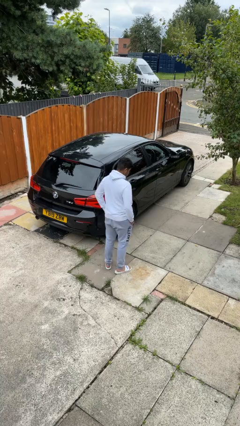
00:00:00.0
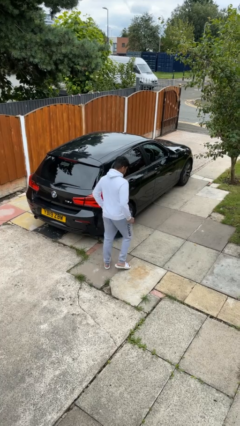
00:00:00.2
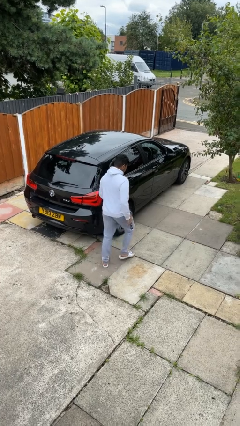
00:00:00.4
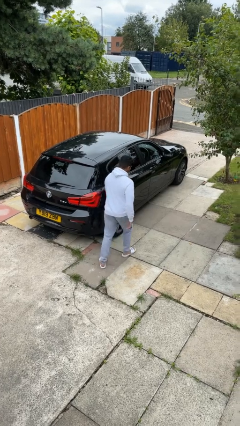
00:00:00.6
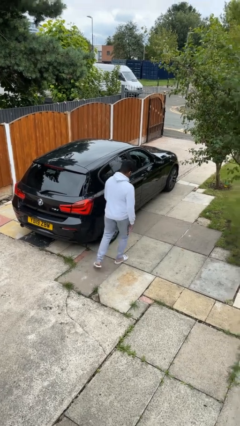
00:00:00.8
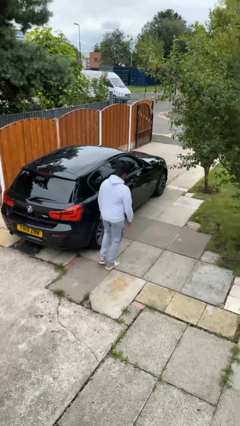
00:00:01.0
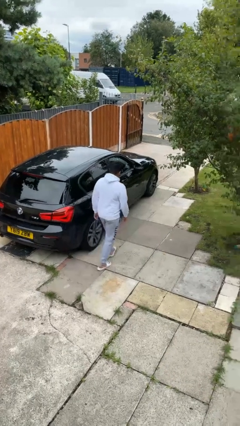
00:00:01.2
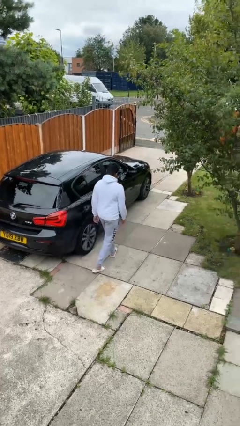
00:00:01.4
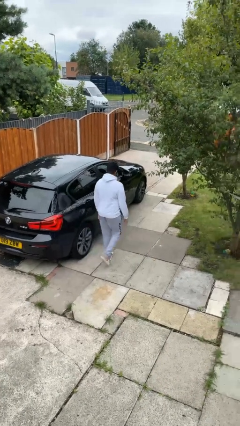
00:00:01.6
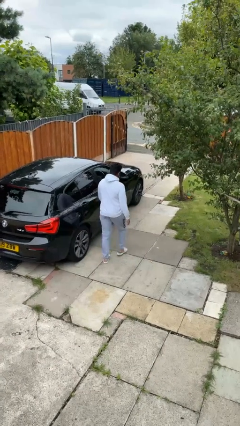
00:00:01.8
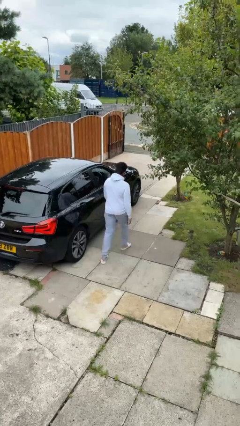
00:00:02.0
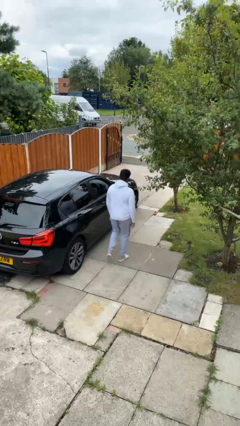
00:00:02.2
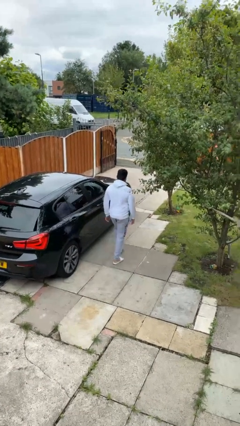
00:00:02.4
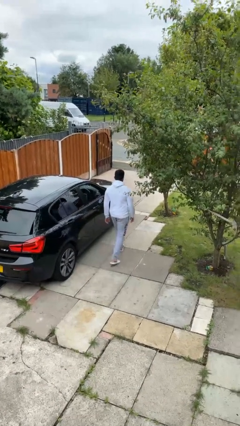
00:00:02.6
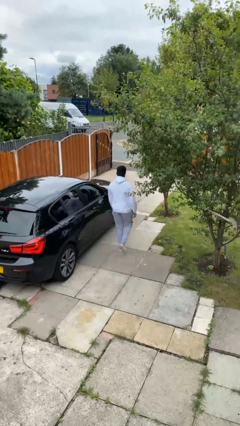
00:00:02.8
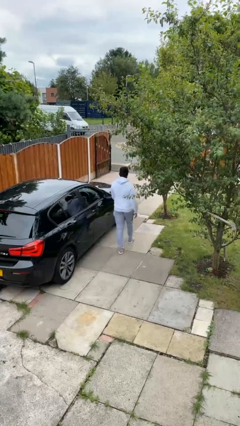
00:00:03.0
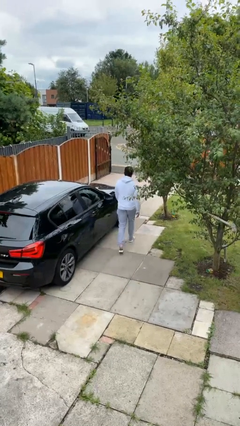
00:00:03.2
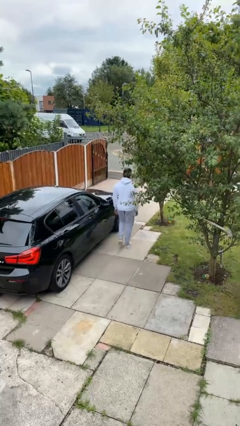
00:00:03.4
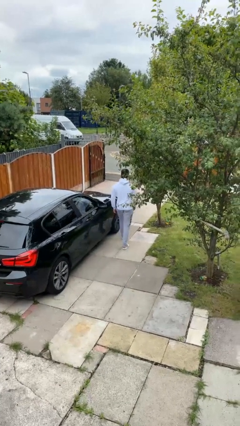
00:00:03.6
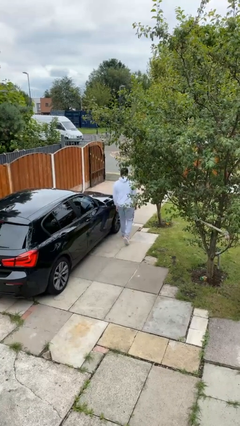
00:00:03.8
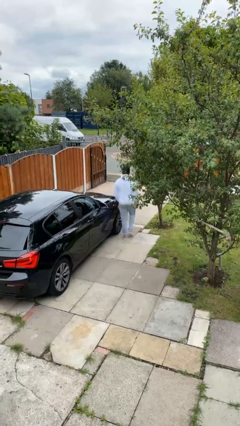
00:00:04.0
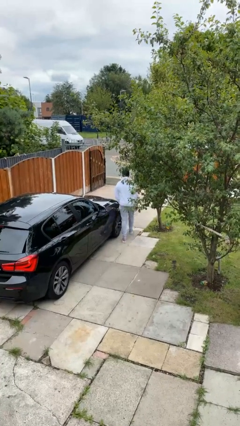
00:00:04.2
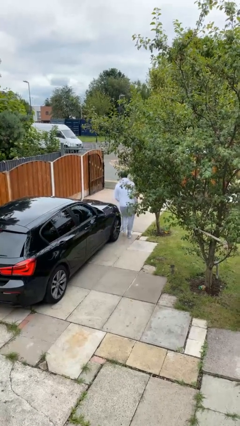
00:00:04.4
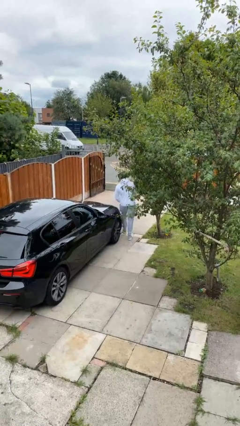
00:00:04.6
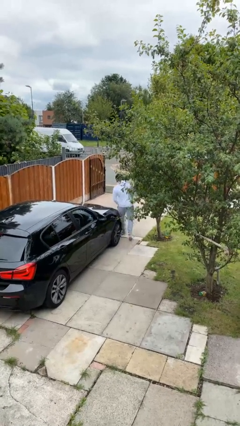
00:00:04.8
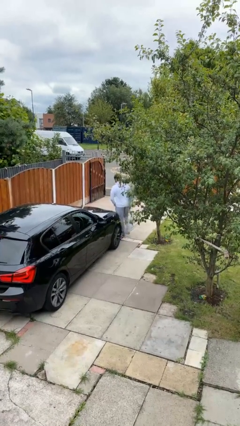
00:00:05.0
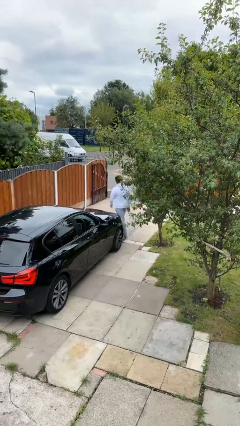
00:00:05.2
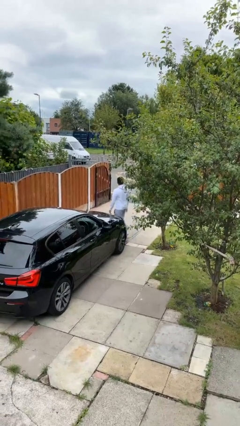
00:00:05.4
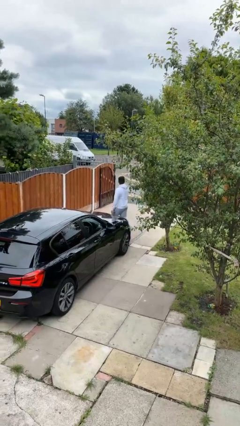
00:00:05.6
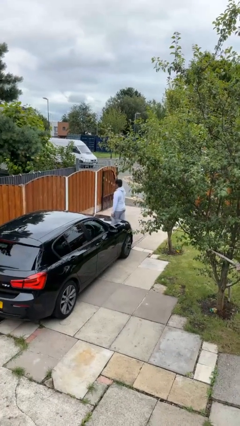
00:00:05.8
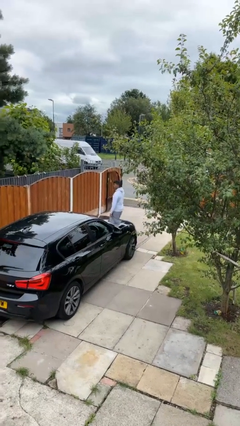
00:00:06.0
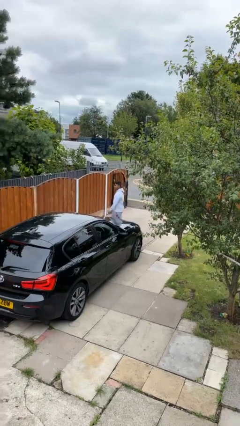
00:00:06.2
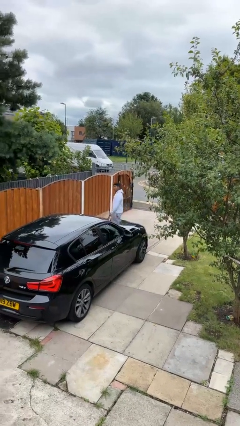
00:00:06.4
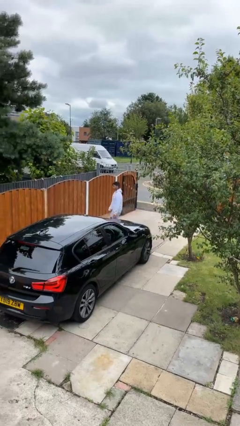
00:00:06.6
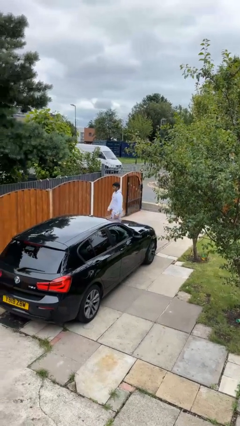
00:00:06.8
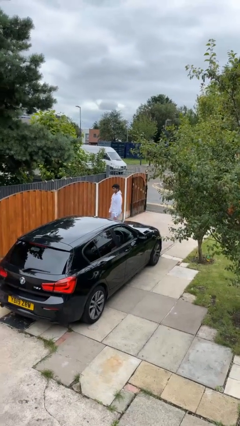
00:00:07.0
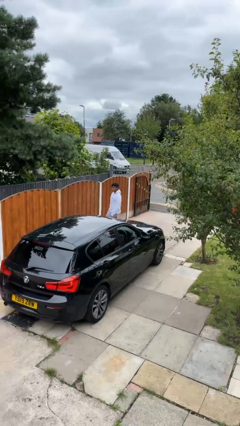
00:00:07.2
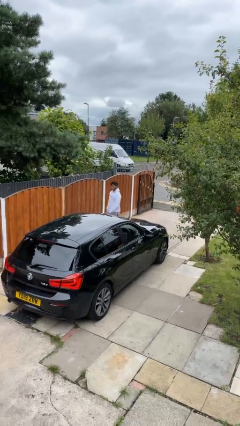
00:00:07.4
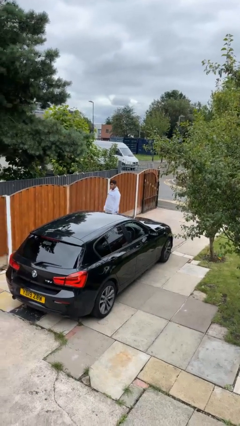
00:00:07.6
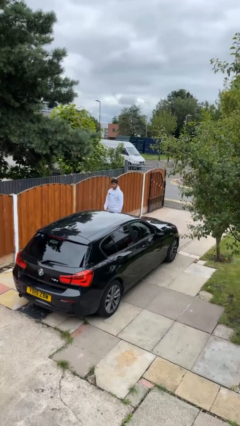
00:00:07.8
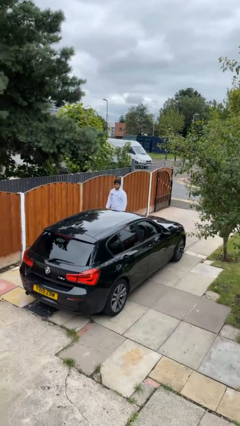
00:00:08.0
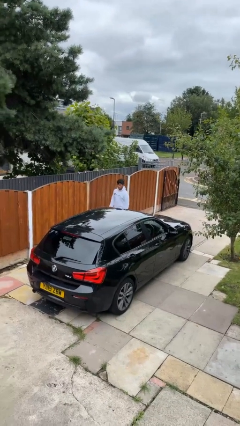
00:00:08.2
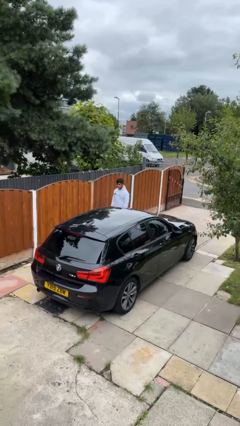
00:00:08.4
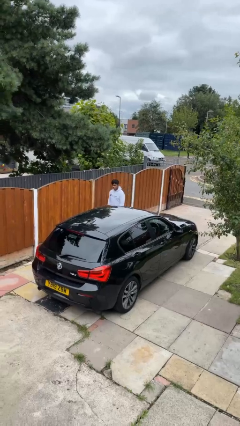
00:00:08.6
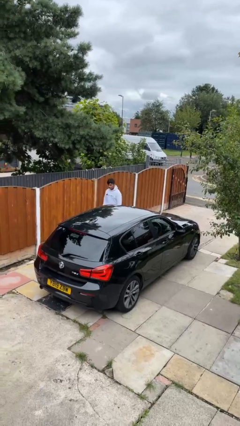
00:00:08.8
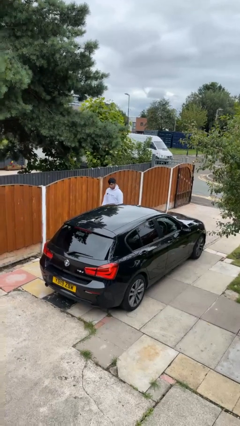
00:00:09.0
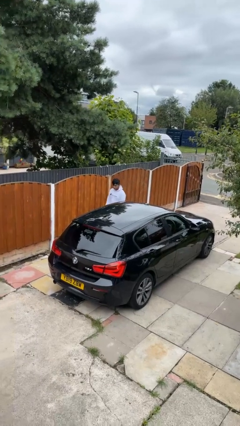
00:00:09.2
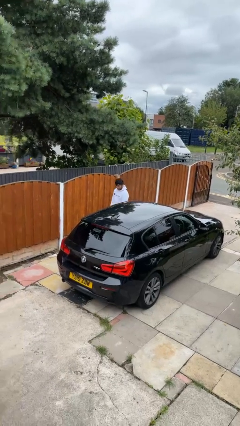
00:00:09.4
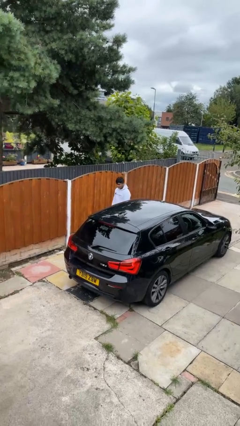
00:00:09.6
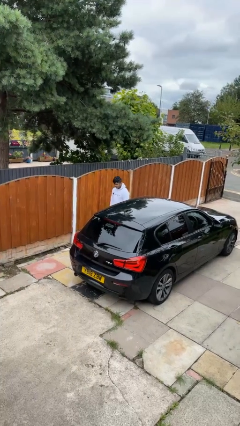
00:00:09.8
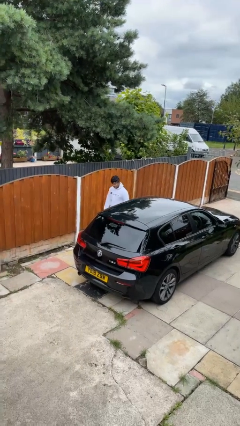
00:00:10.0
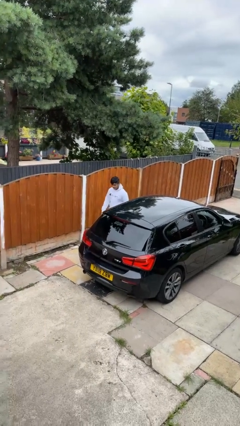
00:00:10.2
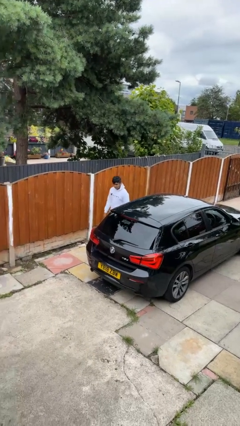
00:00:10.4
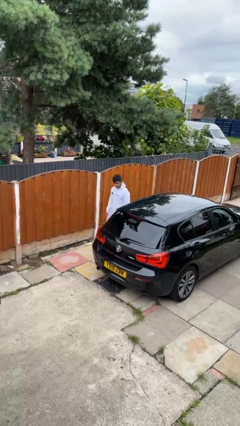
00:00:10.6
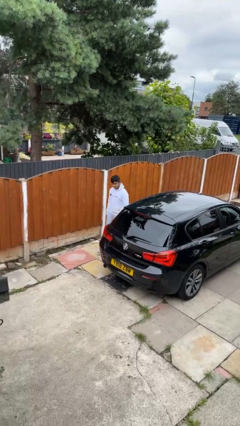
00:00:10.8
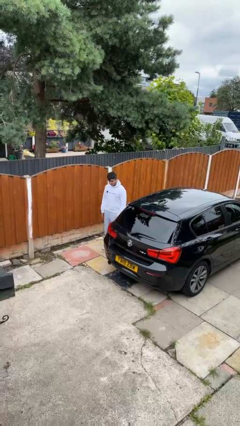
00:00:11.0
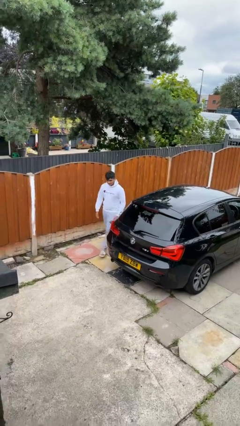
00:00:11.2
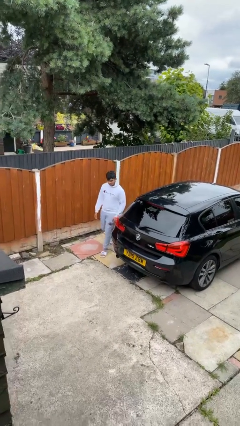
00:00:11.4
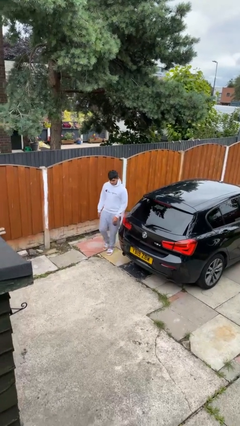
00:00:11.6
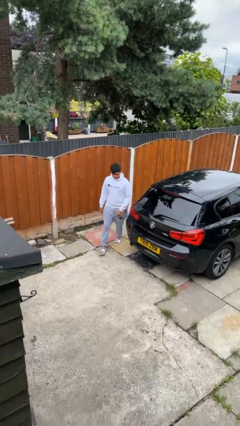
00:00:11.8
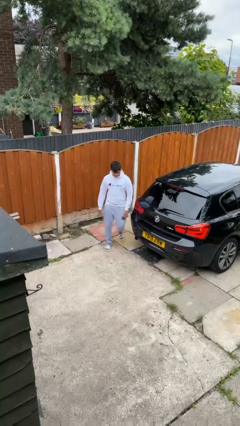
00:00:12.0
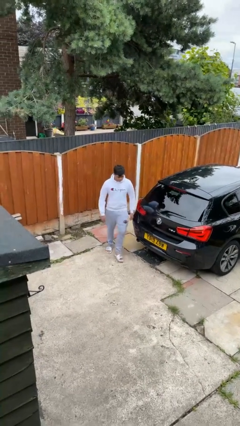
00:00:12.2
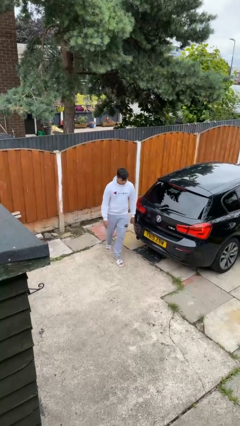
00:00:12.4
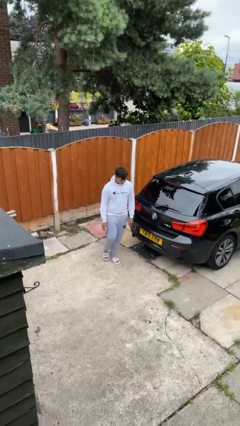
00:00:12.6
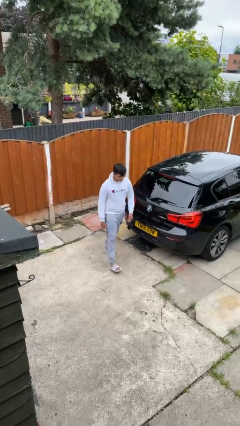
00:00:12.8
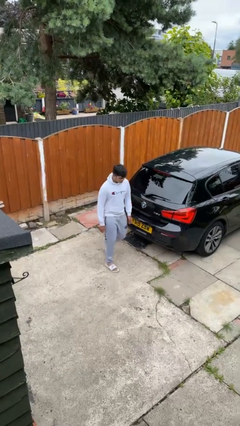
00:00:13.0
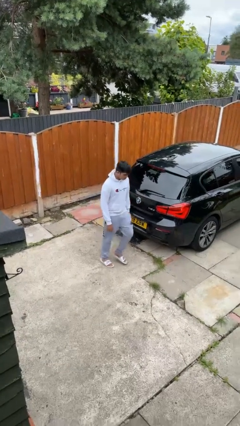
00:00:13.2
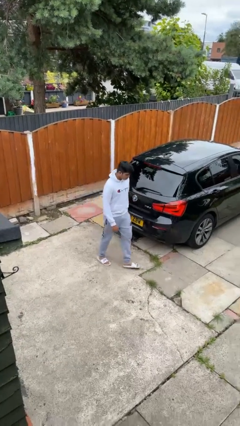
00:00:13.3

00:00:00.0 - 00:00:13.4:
person walks around car

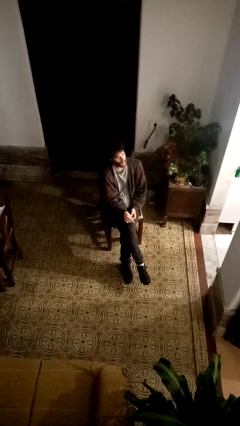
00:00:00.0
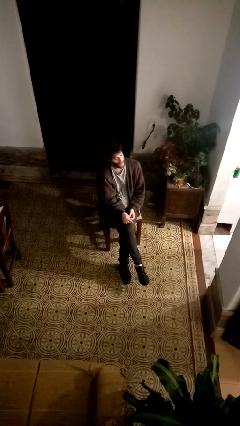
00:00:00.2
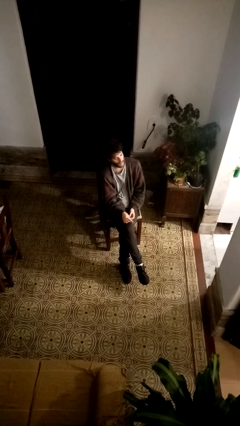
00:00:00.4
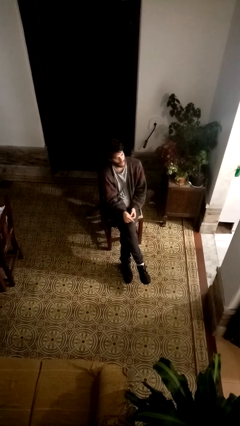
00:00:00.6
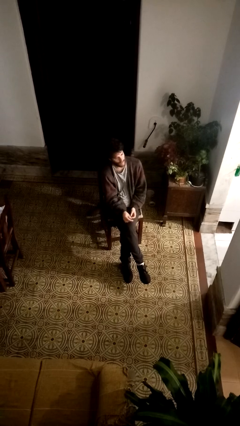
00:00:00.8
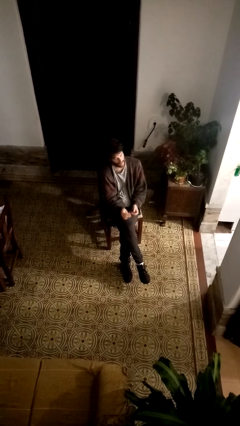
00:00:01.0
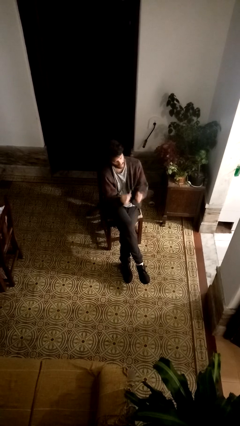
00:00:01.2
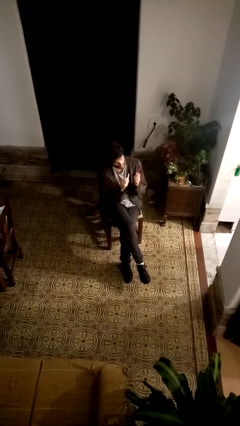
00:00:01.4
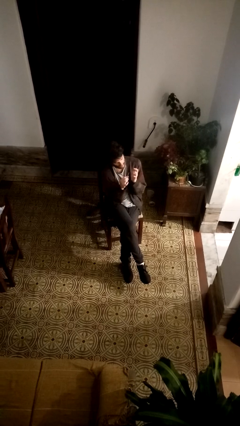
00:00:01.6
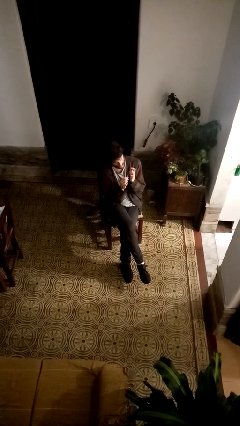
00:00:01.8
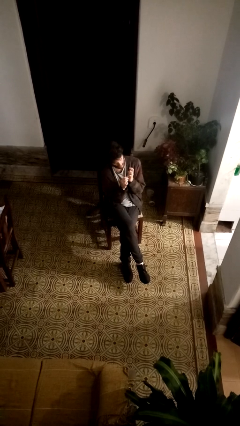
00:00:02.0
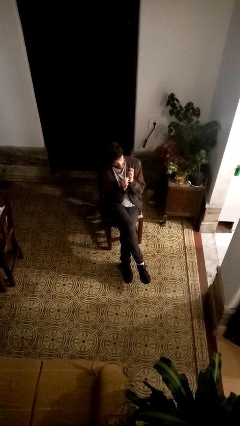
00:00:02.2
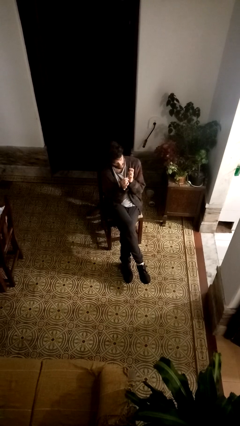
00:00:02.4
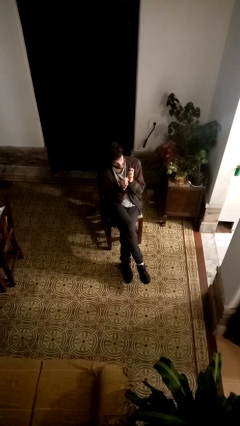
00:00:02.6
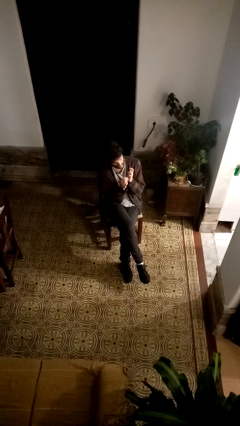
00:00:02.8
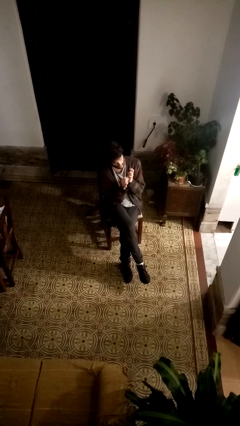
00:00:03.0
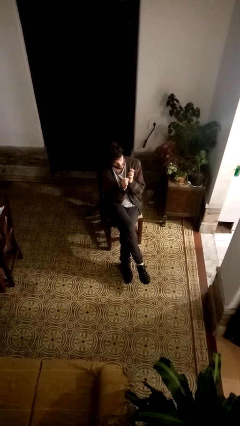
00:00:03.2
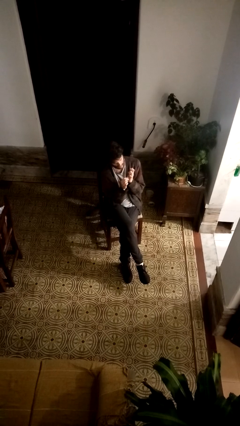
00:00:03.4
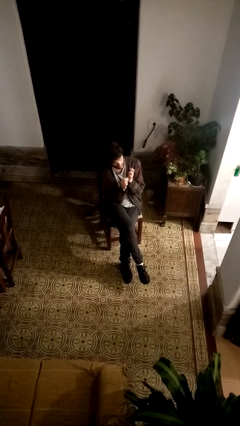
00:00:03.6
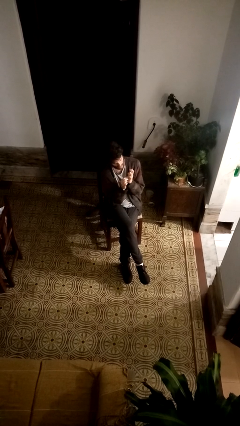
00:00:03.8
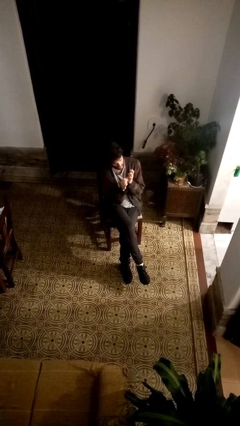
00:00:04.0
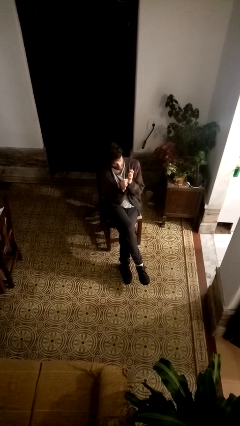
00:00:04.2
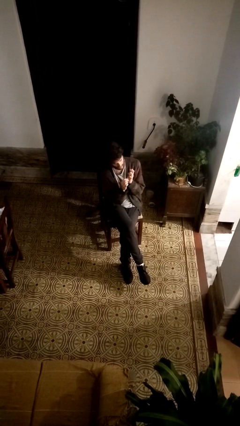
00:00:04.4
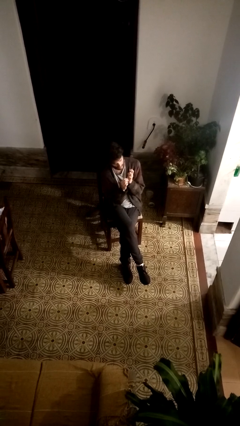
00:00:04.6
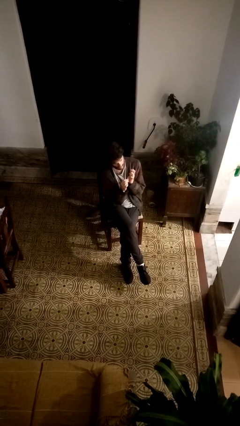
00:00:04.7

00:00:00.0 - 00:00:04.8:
person files fingernails
